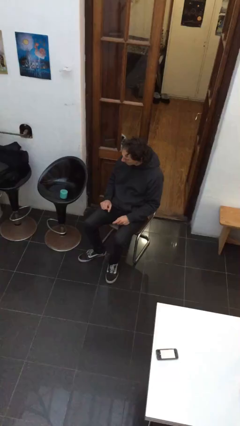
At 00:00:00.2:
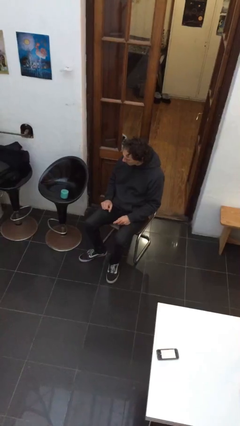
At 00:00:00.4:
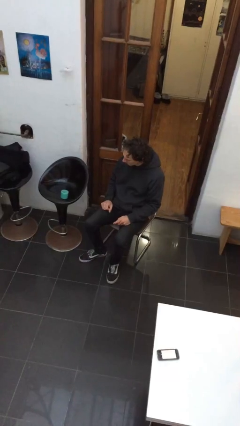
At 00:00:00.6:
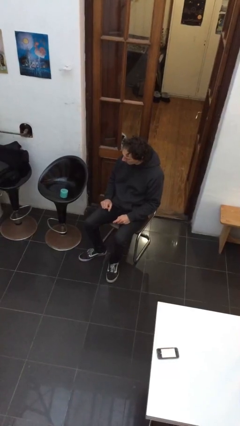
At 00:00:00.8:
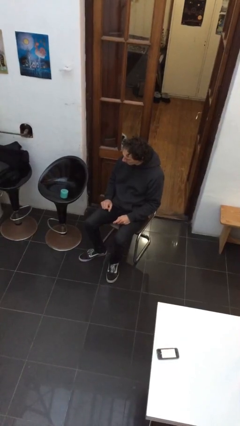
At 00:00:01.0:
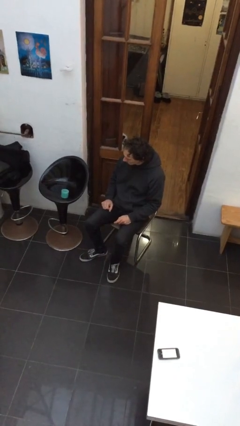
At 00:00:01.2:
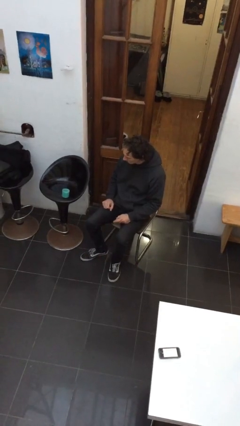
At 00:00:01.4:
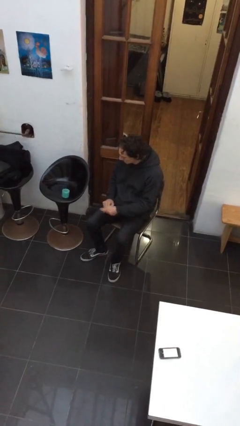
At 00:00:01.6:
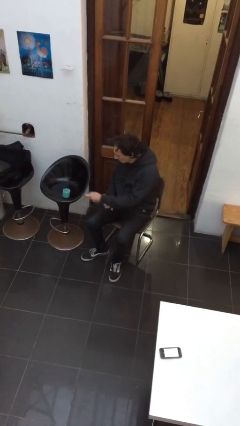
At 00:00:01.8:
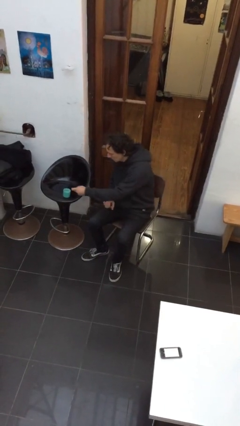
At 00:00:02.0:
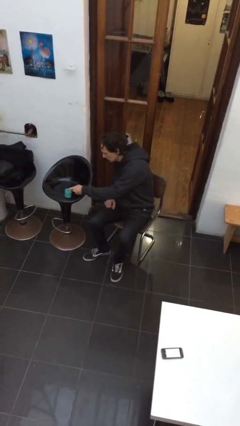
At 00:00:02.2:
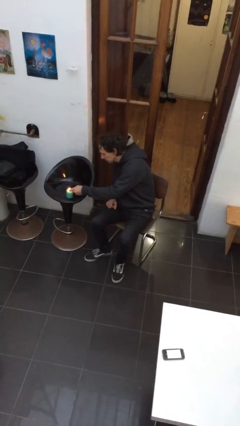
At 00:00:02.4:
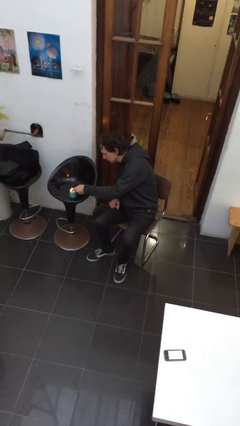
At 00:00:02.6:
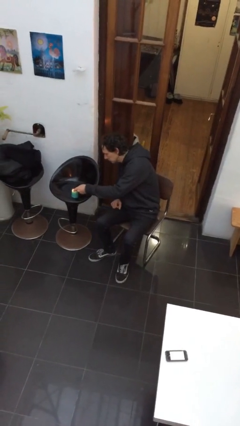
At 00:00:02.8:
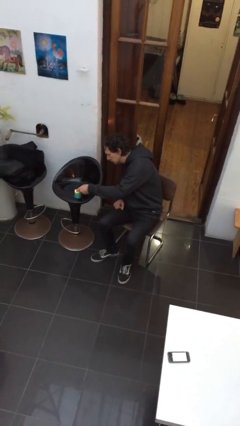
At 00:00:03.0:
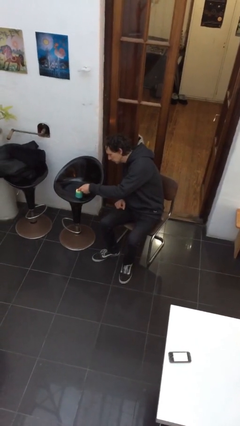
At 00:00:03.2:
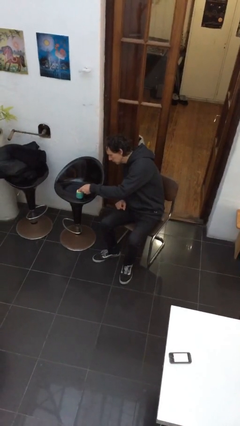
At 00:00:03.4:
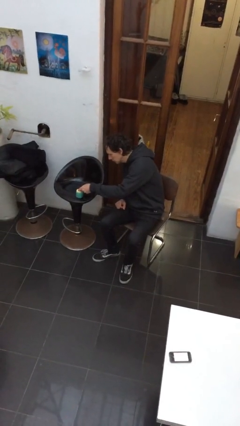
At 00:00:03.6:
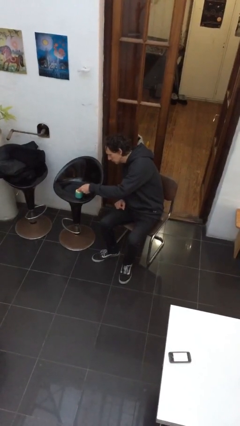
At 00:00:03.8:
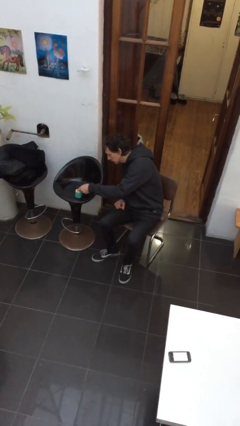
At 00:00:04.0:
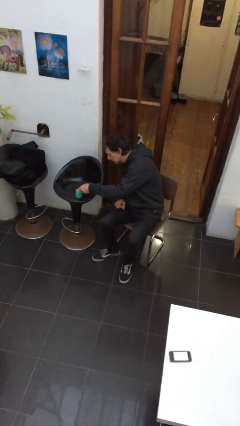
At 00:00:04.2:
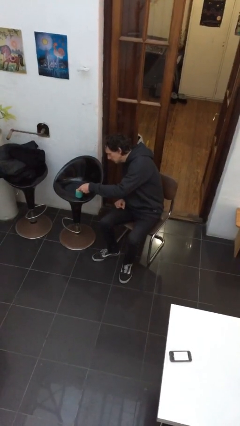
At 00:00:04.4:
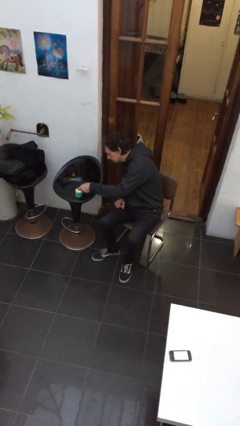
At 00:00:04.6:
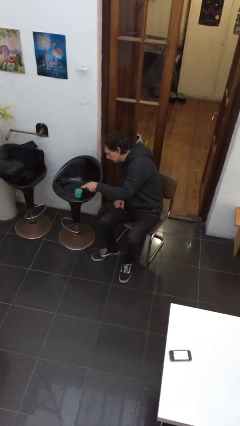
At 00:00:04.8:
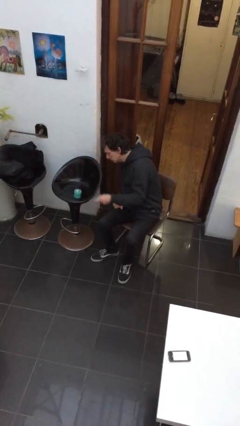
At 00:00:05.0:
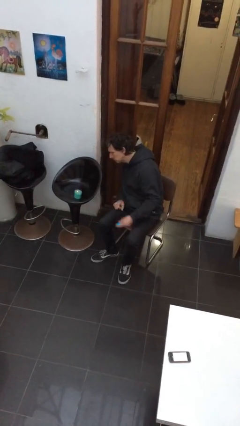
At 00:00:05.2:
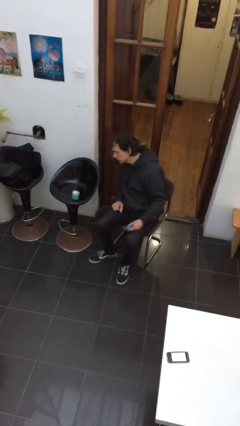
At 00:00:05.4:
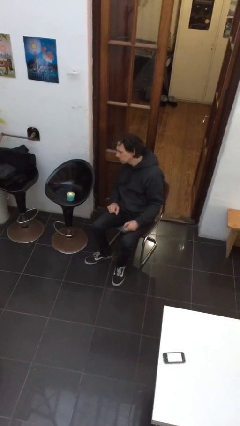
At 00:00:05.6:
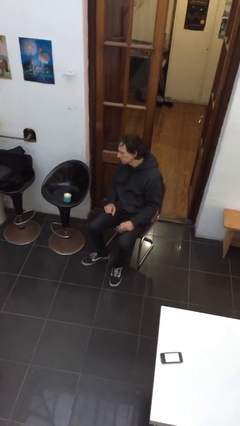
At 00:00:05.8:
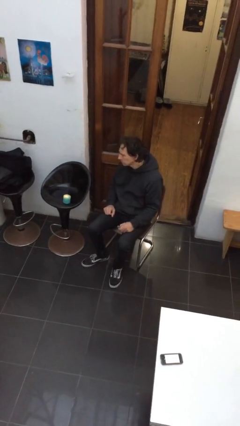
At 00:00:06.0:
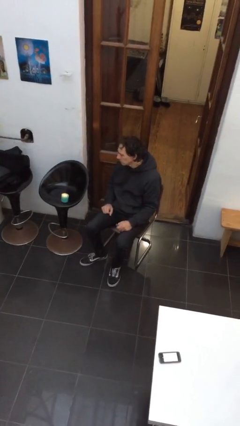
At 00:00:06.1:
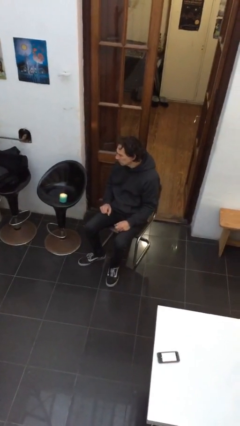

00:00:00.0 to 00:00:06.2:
person lights candle

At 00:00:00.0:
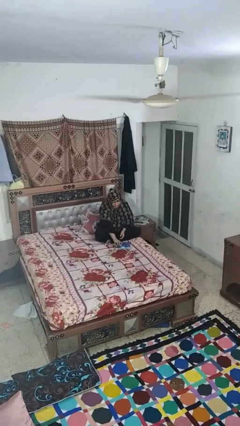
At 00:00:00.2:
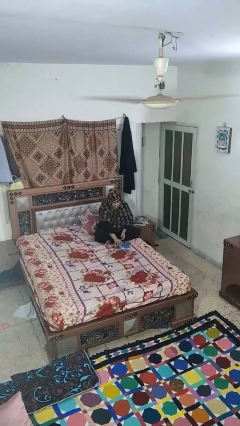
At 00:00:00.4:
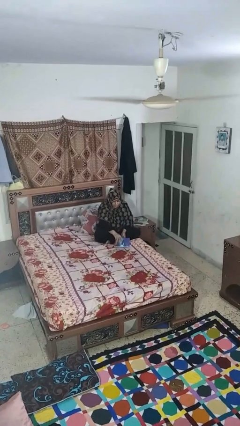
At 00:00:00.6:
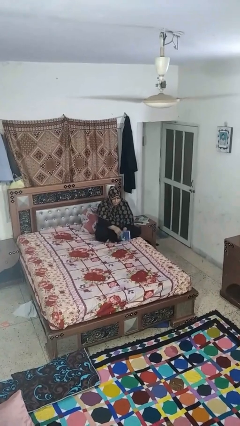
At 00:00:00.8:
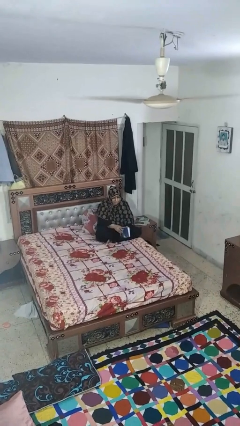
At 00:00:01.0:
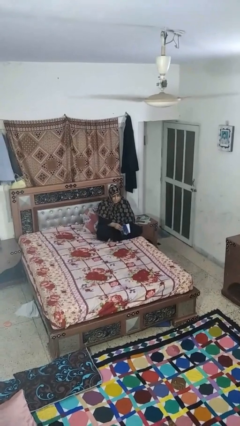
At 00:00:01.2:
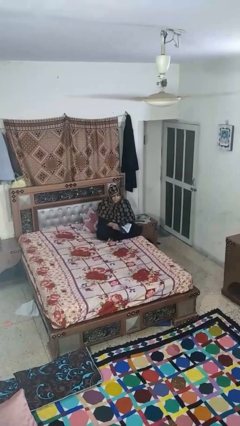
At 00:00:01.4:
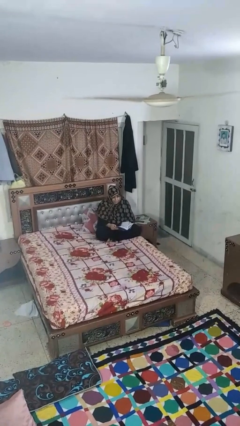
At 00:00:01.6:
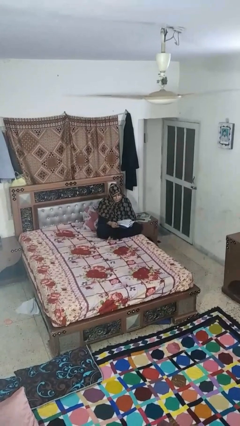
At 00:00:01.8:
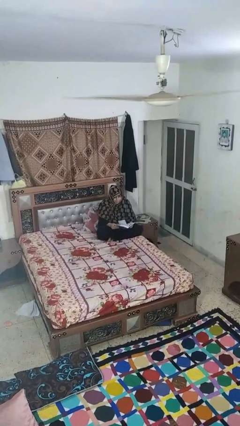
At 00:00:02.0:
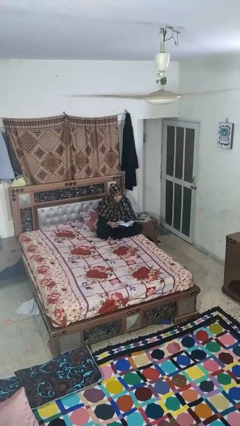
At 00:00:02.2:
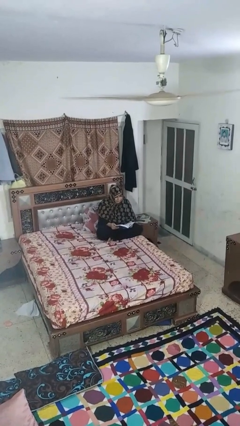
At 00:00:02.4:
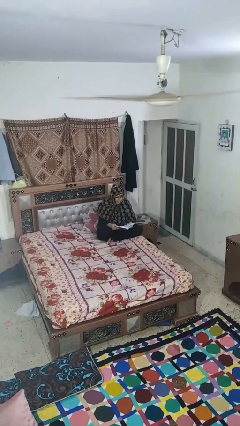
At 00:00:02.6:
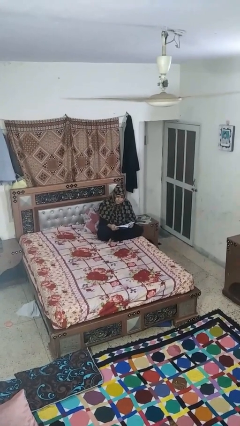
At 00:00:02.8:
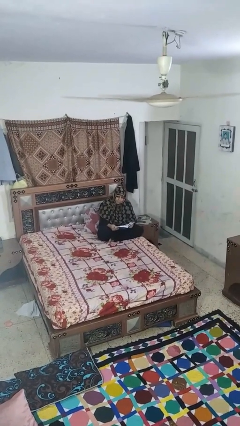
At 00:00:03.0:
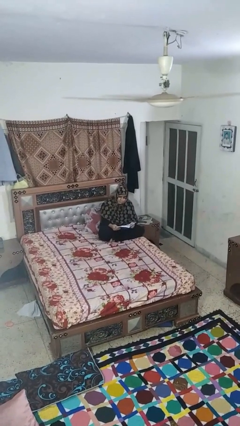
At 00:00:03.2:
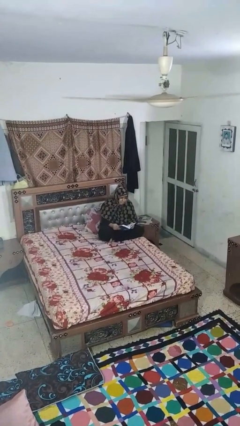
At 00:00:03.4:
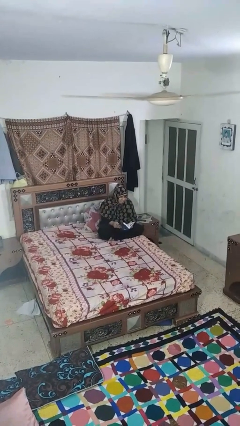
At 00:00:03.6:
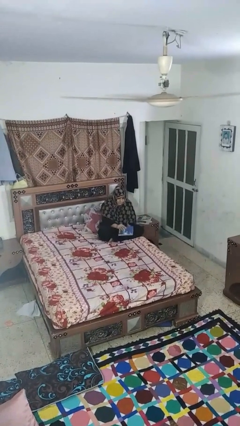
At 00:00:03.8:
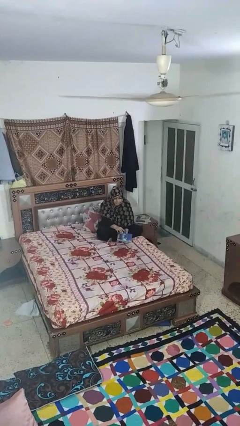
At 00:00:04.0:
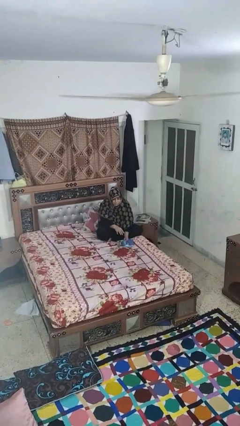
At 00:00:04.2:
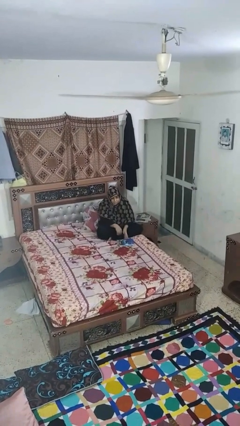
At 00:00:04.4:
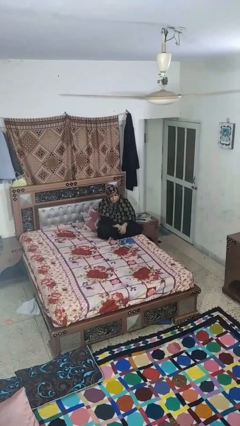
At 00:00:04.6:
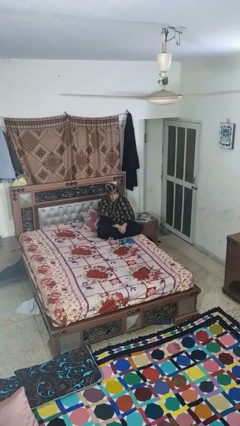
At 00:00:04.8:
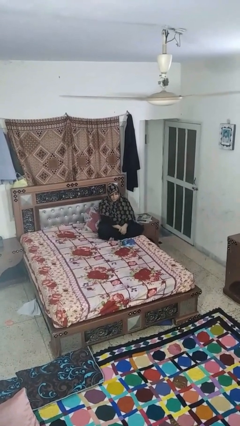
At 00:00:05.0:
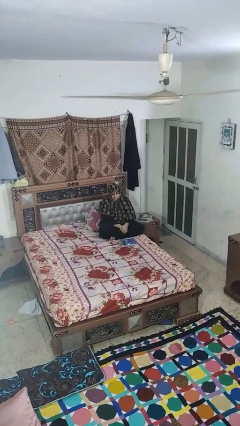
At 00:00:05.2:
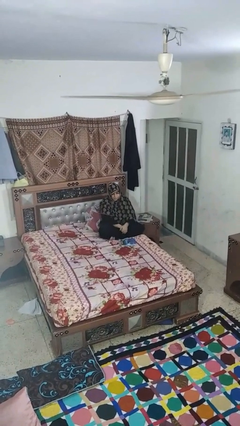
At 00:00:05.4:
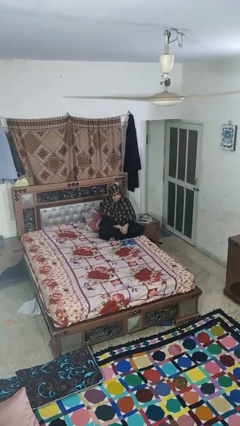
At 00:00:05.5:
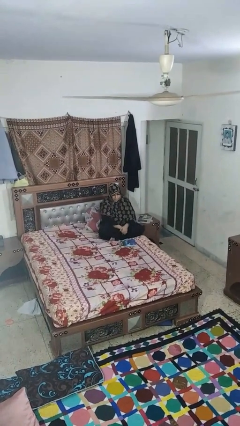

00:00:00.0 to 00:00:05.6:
person reads book

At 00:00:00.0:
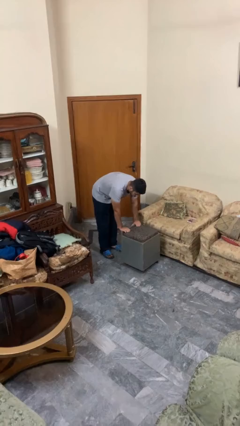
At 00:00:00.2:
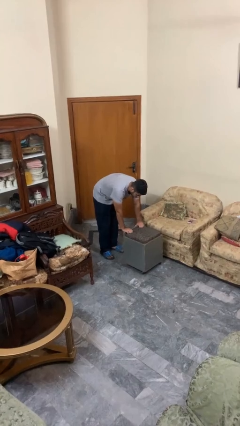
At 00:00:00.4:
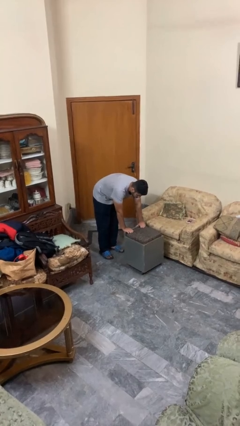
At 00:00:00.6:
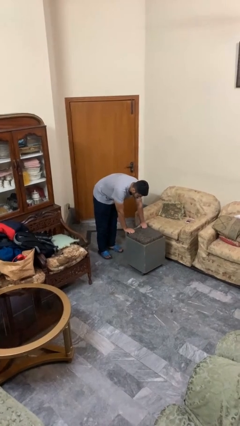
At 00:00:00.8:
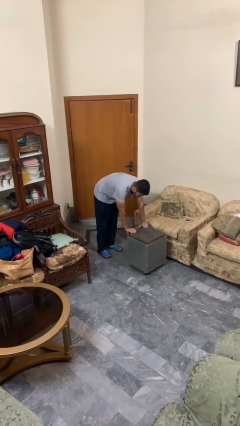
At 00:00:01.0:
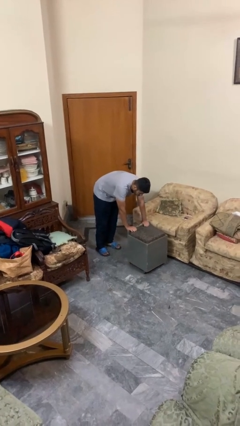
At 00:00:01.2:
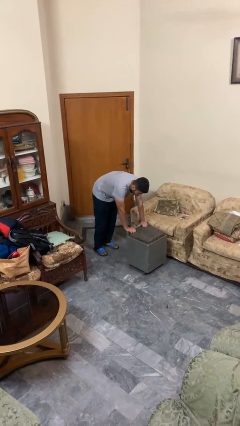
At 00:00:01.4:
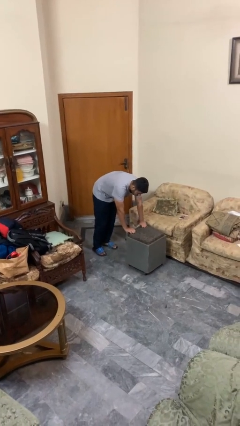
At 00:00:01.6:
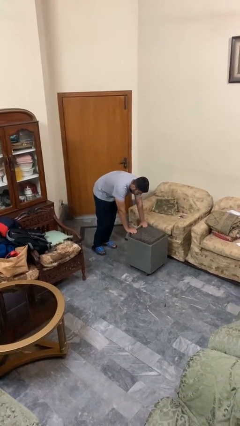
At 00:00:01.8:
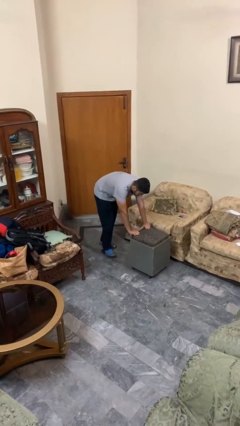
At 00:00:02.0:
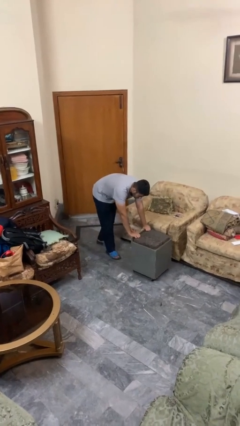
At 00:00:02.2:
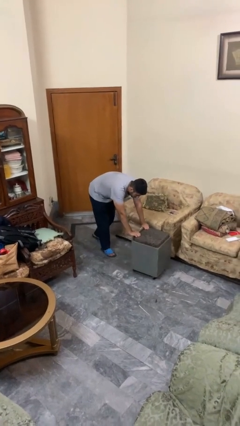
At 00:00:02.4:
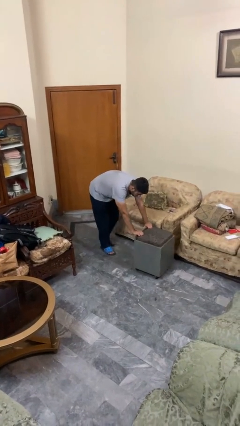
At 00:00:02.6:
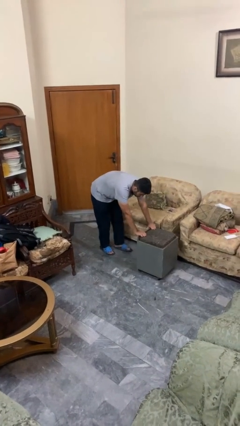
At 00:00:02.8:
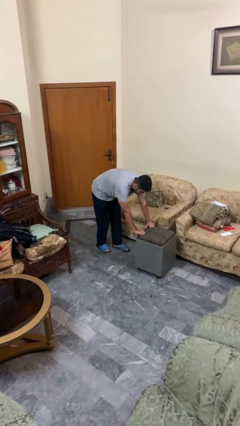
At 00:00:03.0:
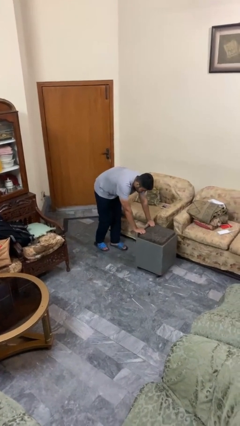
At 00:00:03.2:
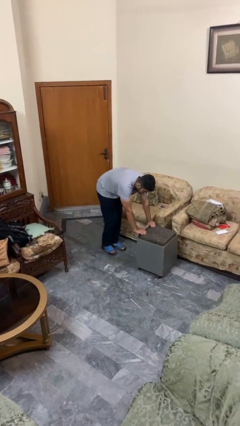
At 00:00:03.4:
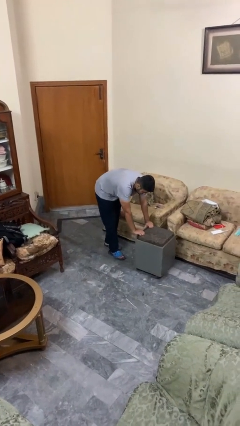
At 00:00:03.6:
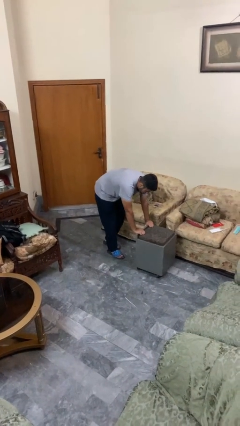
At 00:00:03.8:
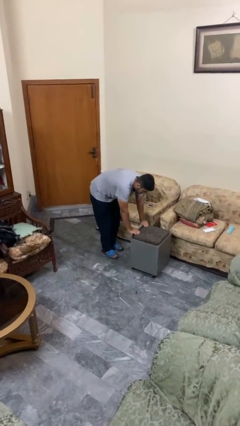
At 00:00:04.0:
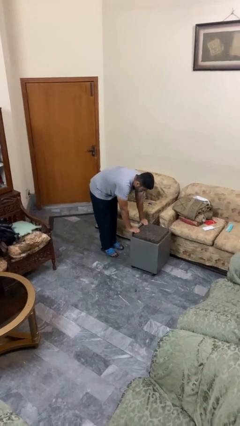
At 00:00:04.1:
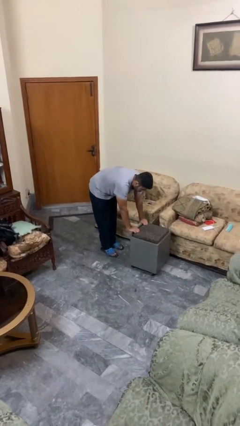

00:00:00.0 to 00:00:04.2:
person pushes wheeled cart

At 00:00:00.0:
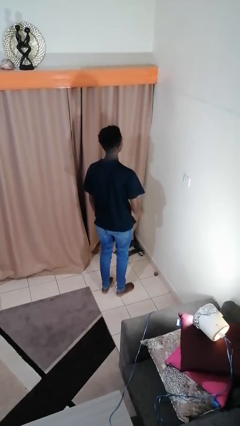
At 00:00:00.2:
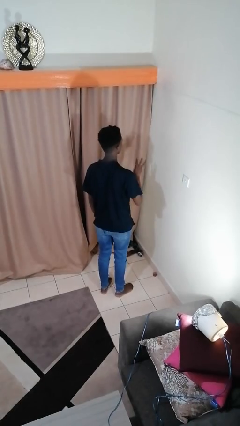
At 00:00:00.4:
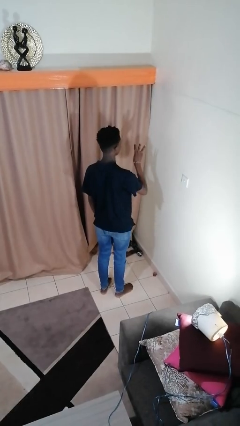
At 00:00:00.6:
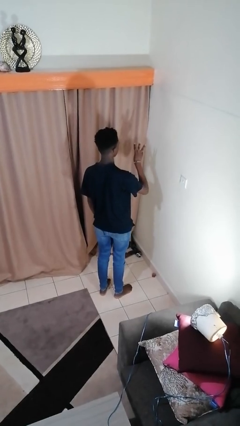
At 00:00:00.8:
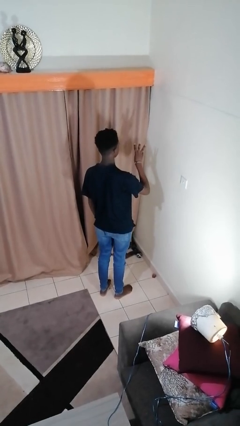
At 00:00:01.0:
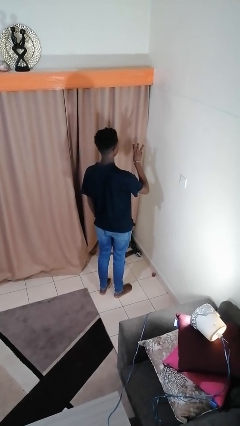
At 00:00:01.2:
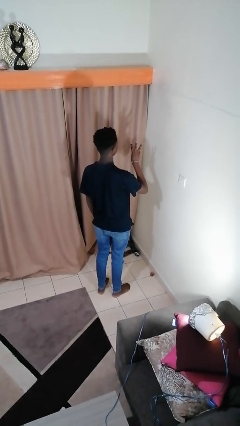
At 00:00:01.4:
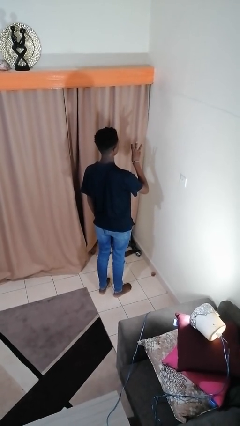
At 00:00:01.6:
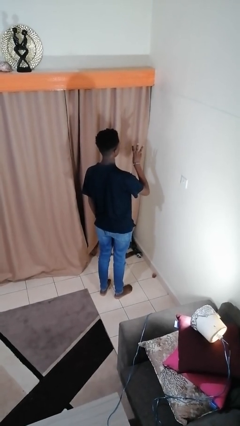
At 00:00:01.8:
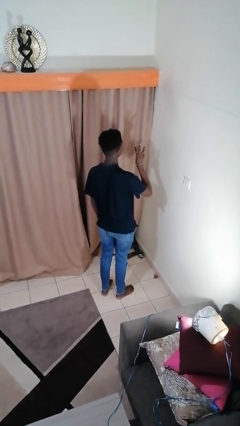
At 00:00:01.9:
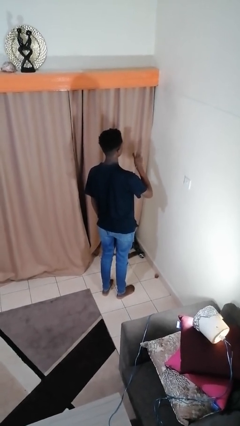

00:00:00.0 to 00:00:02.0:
person gestures number three
